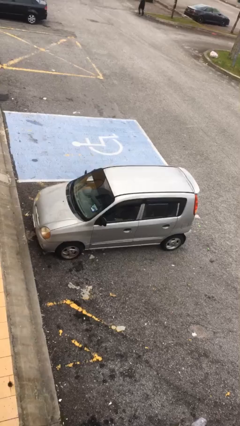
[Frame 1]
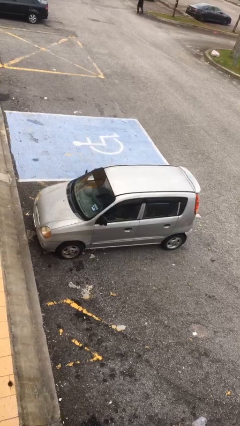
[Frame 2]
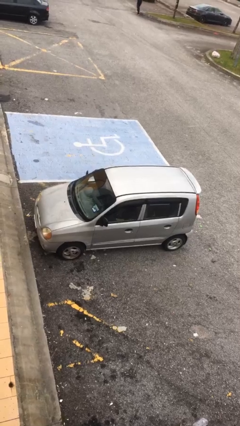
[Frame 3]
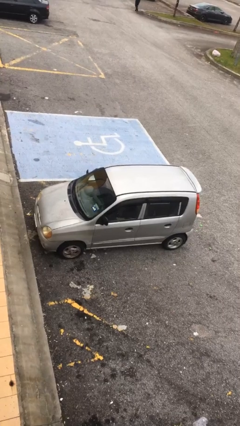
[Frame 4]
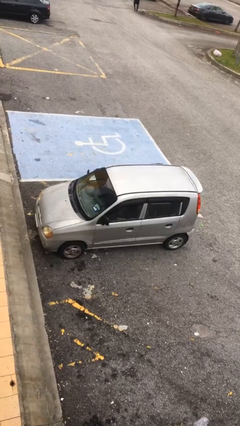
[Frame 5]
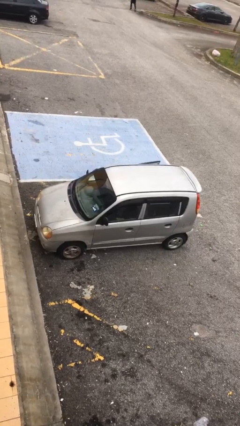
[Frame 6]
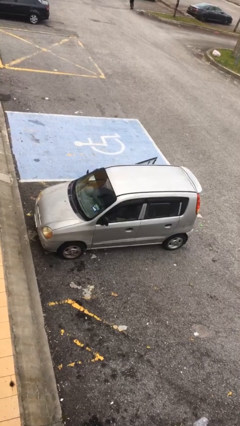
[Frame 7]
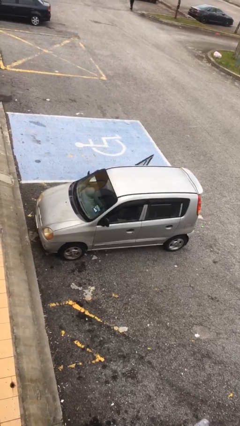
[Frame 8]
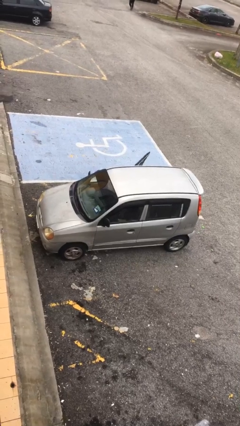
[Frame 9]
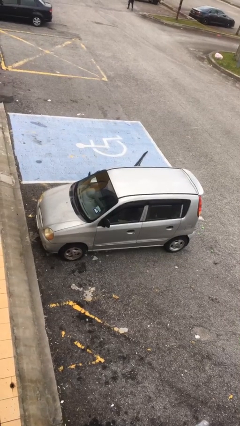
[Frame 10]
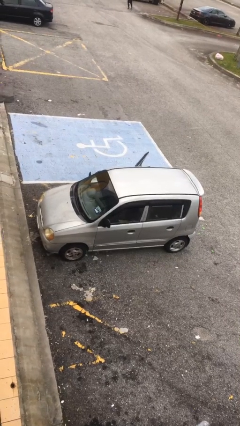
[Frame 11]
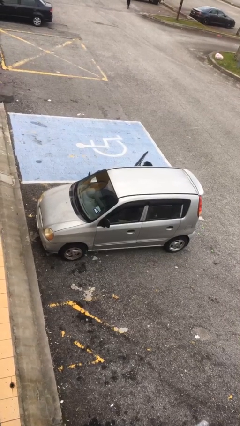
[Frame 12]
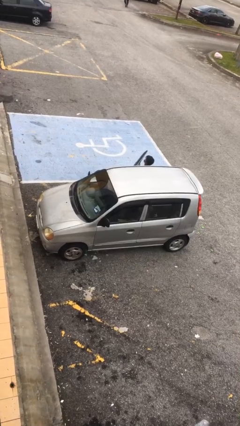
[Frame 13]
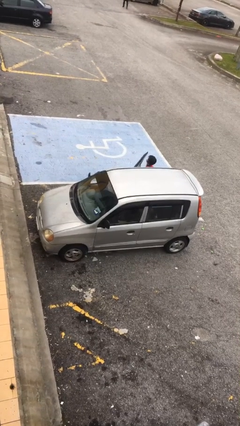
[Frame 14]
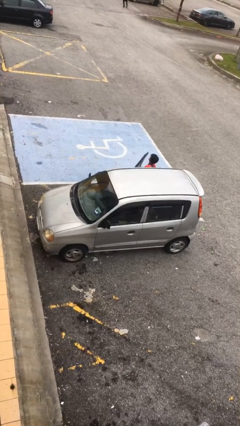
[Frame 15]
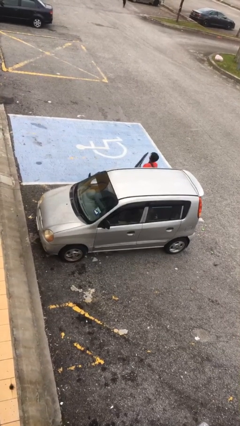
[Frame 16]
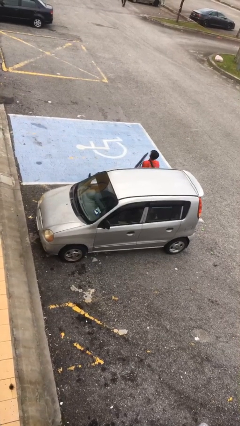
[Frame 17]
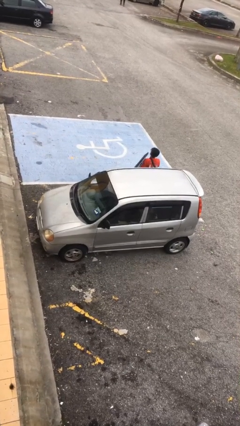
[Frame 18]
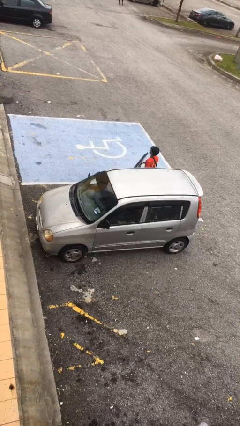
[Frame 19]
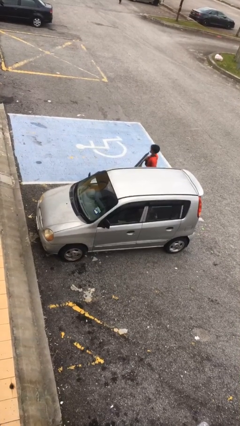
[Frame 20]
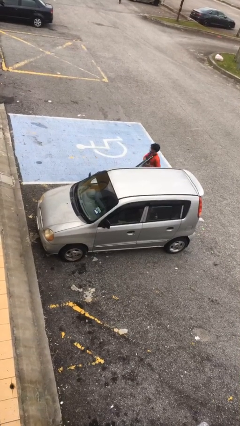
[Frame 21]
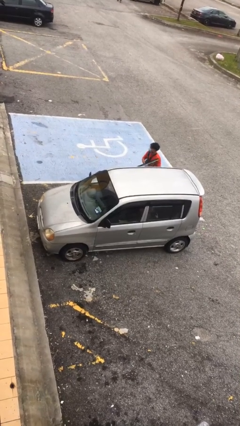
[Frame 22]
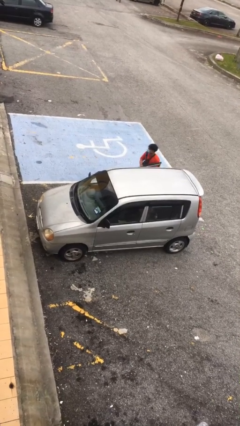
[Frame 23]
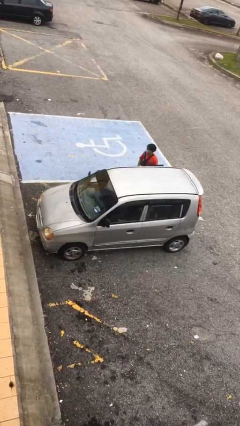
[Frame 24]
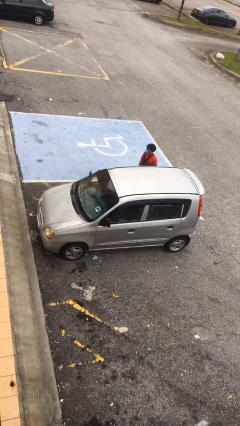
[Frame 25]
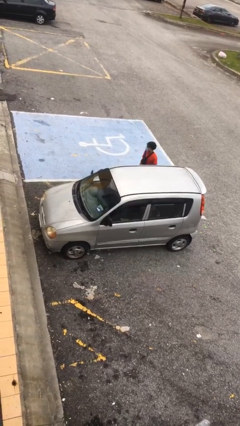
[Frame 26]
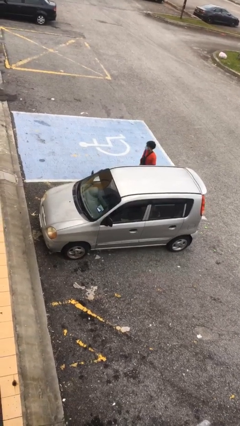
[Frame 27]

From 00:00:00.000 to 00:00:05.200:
car drops off person

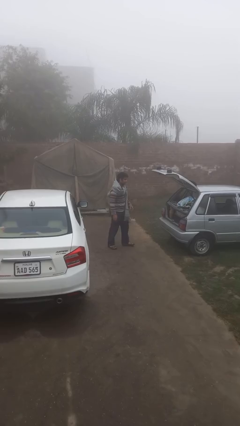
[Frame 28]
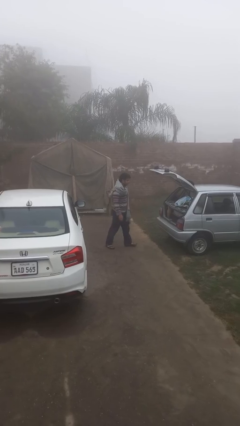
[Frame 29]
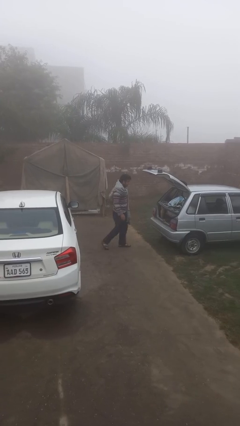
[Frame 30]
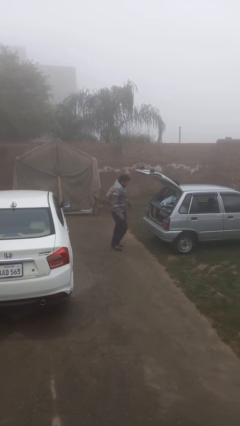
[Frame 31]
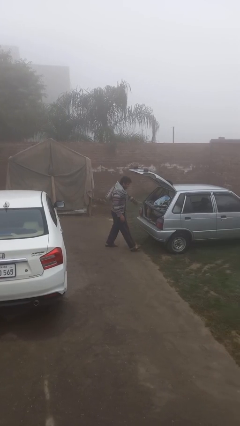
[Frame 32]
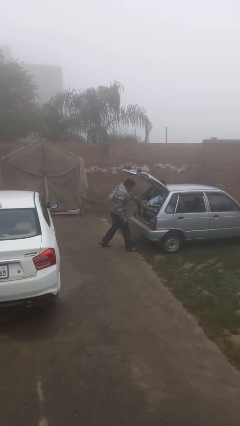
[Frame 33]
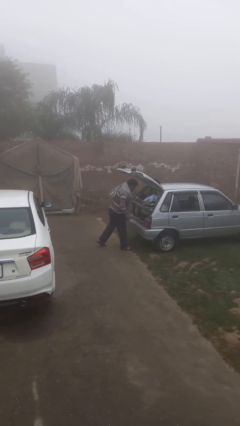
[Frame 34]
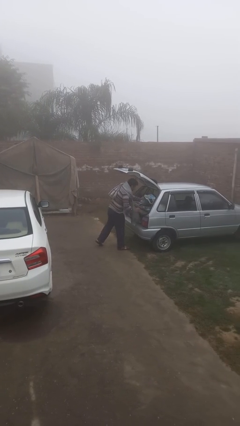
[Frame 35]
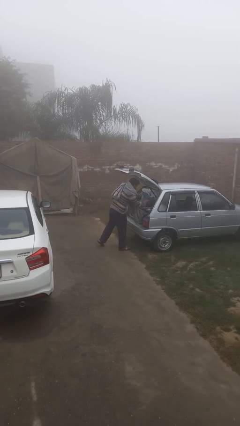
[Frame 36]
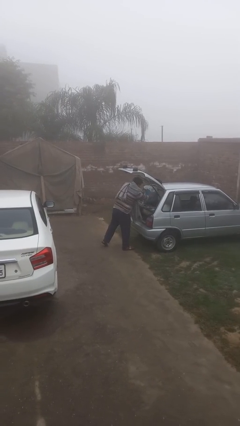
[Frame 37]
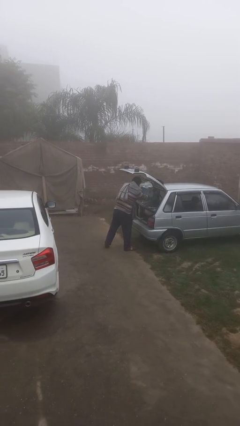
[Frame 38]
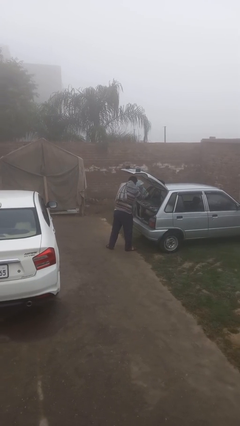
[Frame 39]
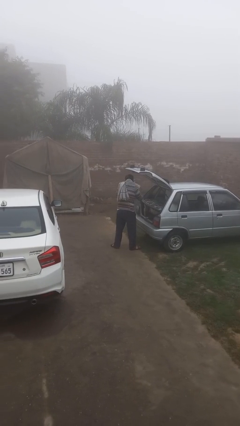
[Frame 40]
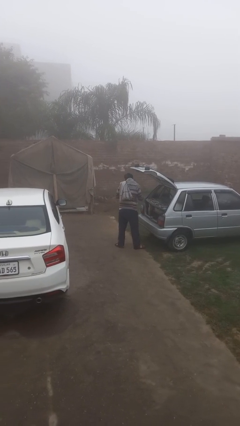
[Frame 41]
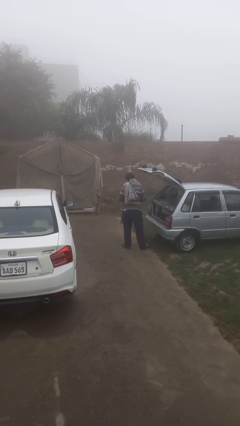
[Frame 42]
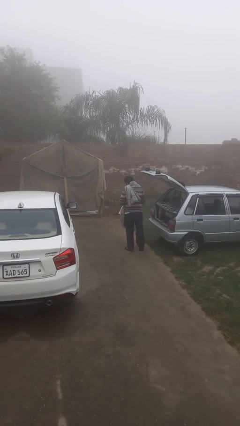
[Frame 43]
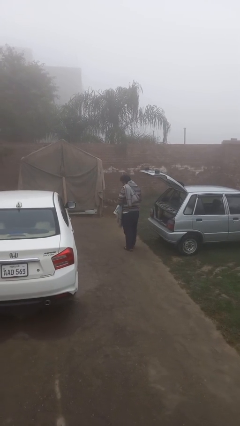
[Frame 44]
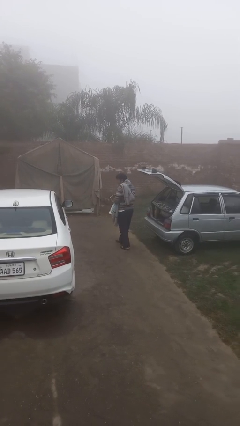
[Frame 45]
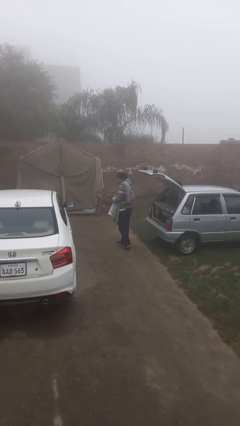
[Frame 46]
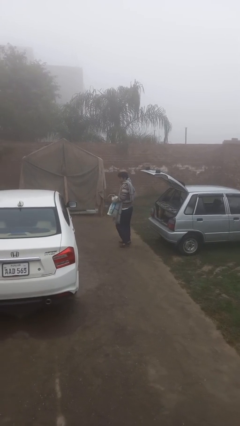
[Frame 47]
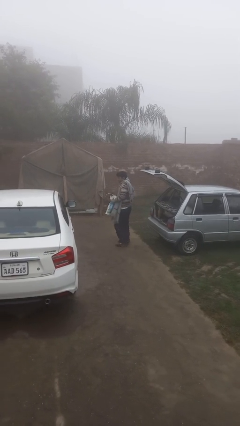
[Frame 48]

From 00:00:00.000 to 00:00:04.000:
person unloads car

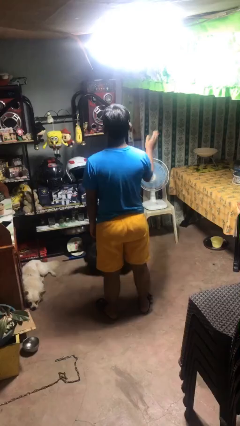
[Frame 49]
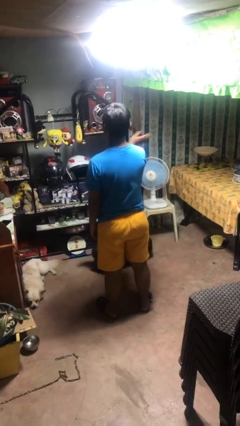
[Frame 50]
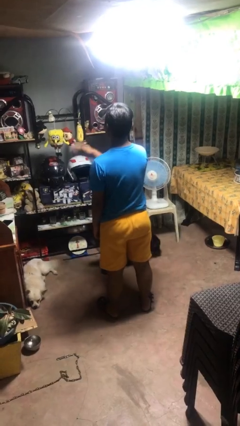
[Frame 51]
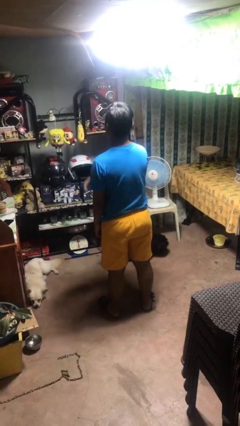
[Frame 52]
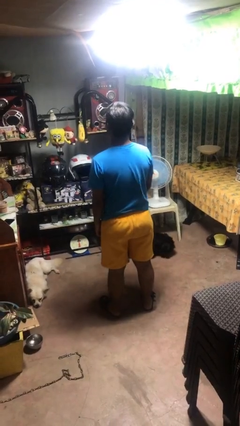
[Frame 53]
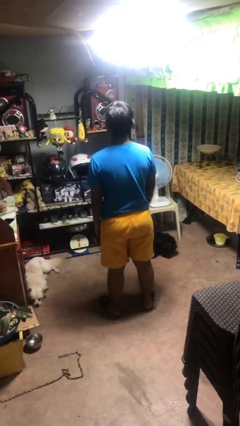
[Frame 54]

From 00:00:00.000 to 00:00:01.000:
person gestures swipe left

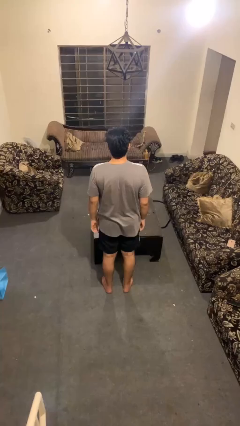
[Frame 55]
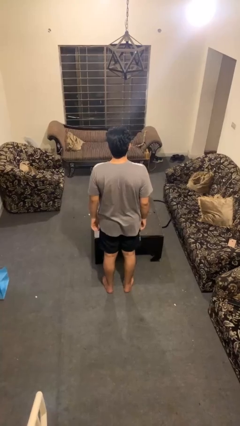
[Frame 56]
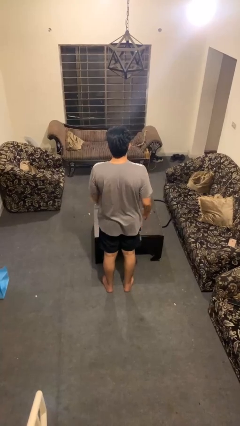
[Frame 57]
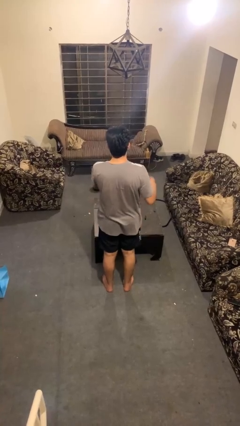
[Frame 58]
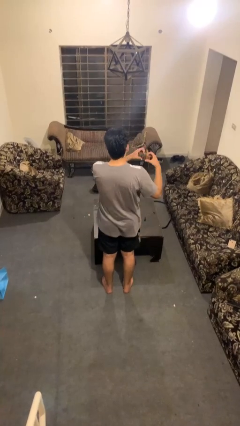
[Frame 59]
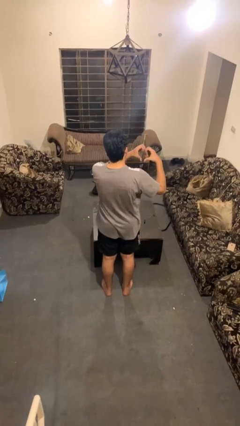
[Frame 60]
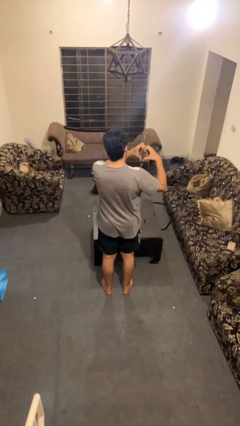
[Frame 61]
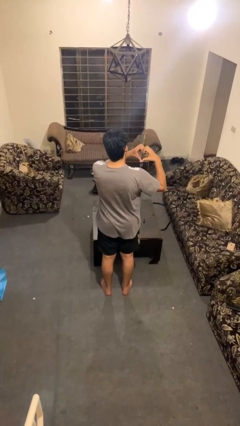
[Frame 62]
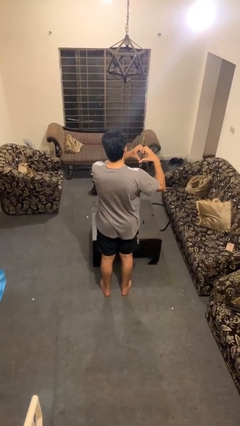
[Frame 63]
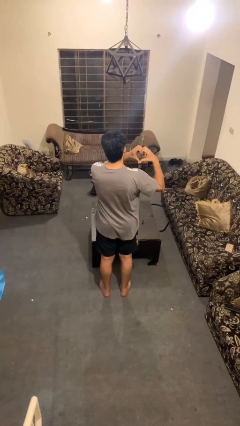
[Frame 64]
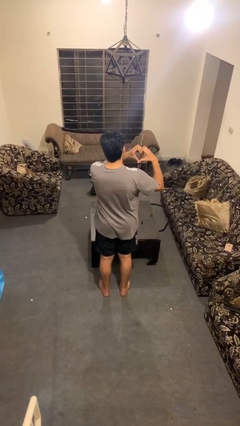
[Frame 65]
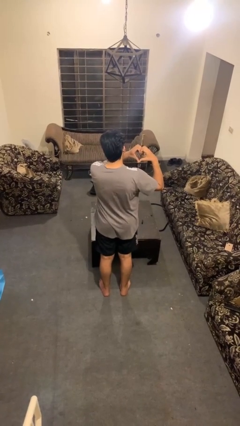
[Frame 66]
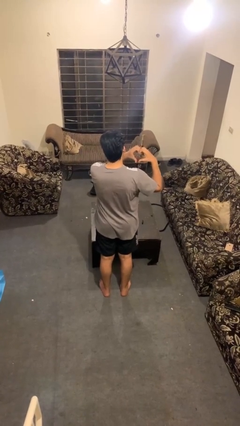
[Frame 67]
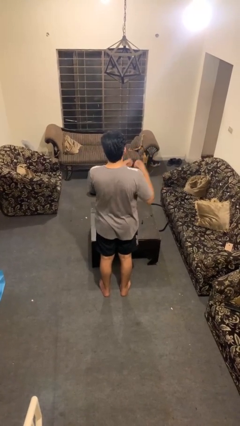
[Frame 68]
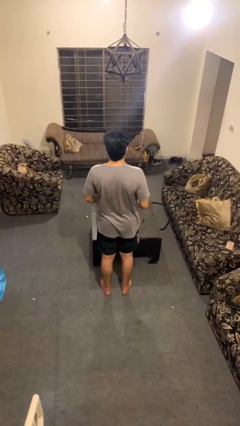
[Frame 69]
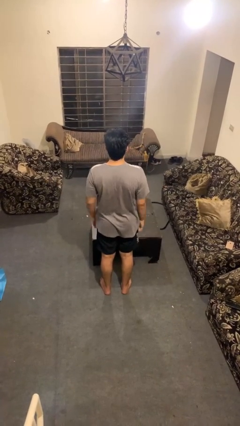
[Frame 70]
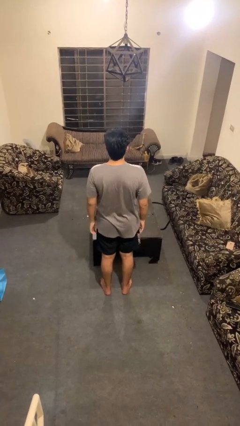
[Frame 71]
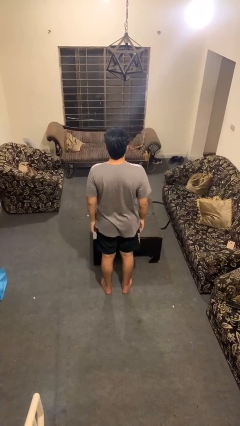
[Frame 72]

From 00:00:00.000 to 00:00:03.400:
person gestures heart

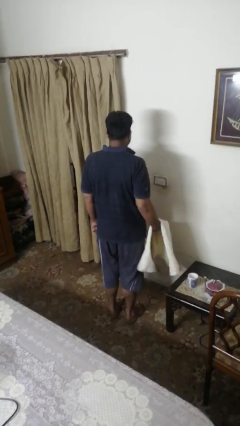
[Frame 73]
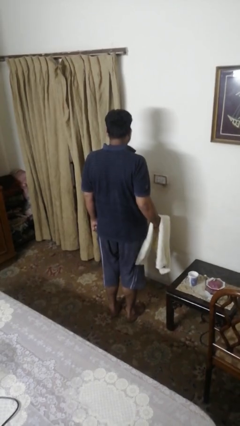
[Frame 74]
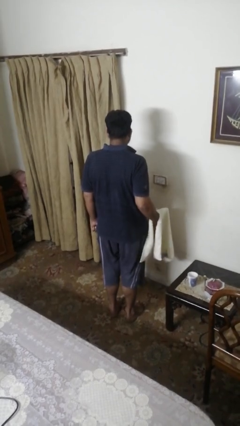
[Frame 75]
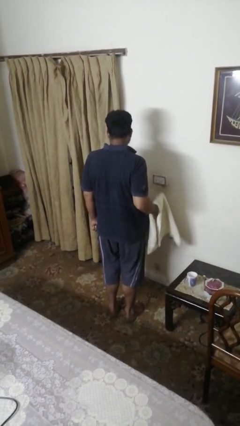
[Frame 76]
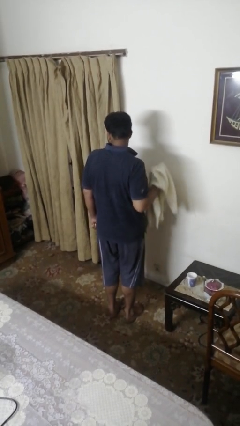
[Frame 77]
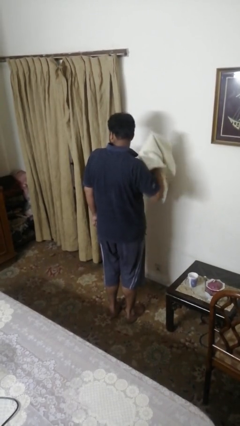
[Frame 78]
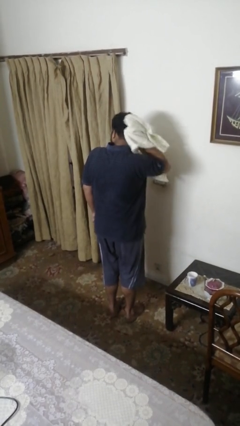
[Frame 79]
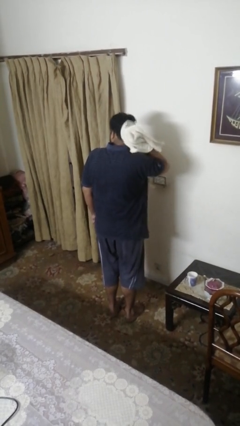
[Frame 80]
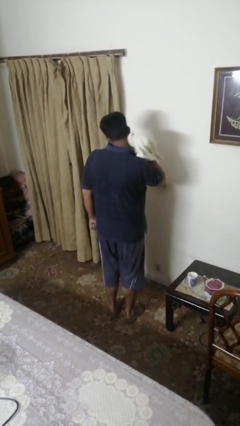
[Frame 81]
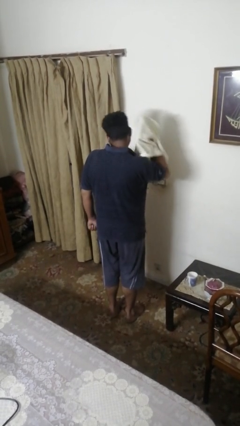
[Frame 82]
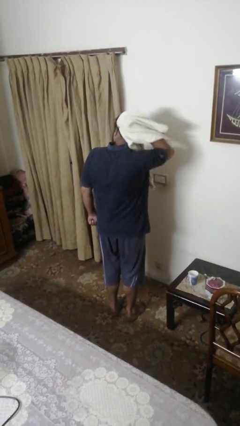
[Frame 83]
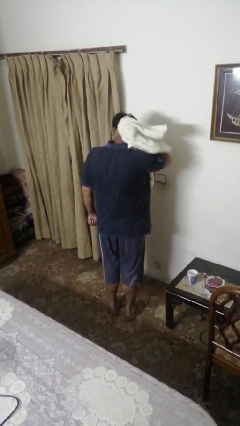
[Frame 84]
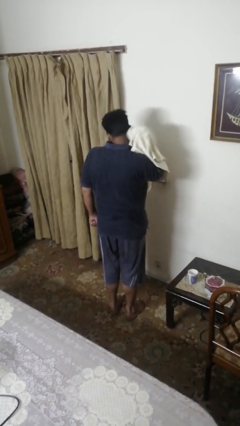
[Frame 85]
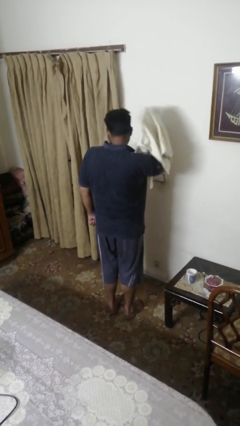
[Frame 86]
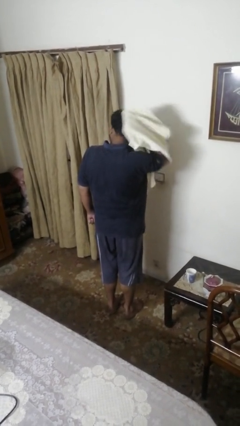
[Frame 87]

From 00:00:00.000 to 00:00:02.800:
person dries hair with towel

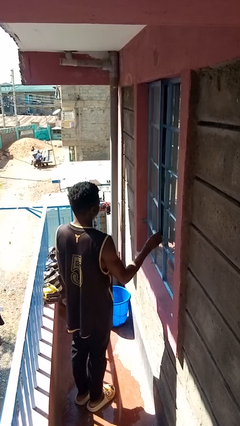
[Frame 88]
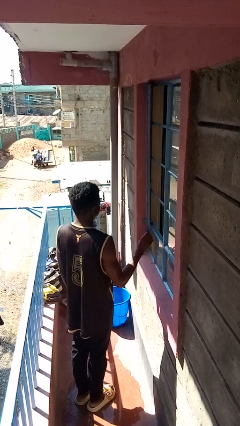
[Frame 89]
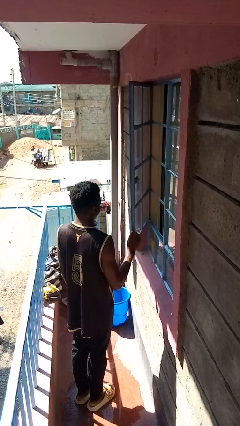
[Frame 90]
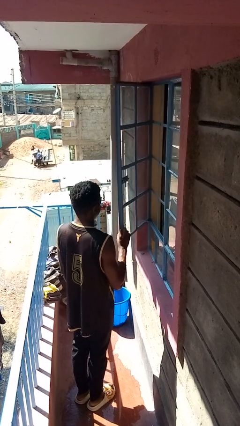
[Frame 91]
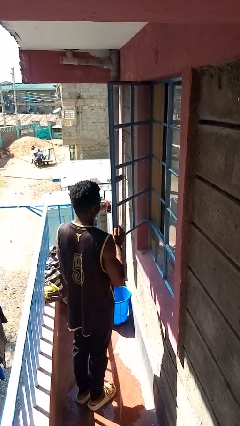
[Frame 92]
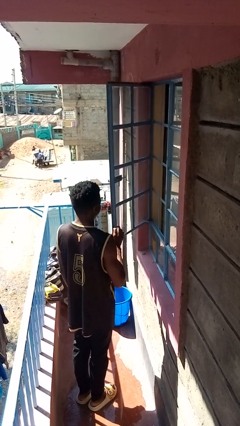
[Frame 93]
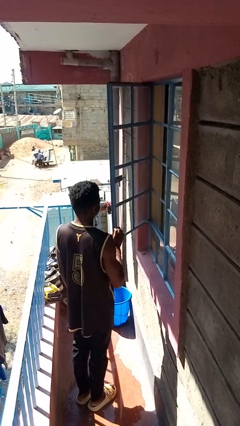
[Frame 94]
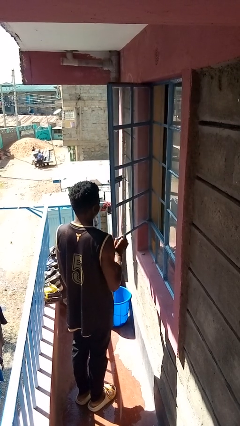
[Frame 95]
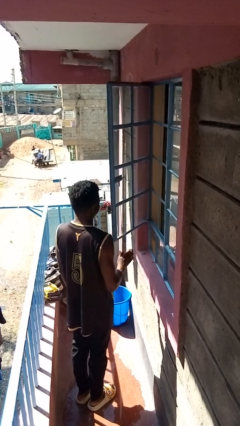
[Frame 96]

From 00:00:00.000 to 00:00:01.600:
person opens home window
